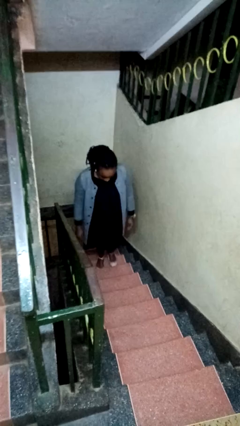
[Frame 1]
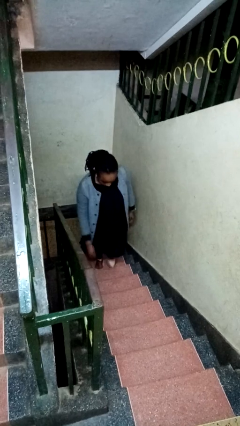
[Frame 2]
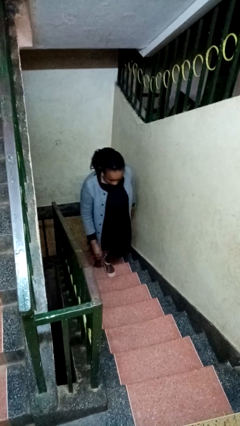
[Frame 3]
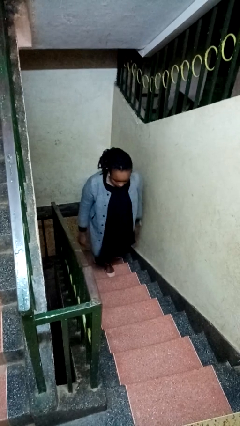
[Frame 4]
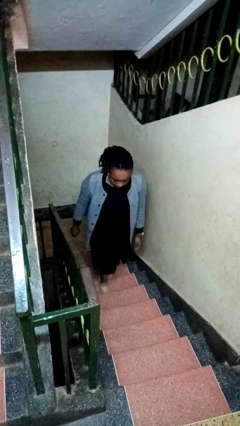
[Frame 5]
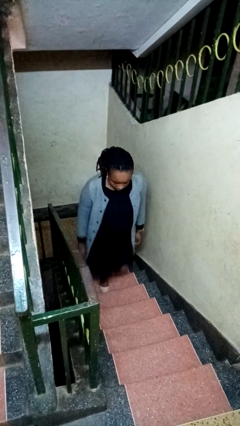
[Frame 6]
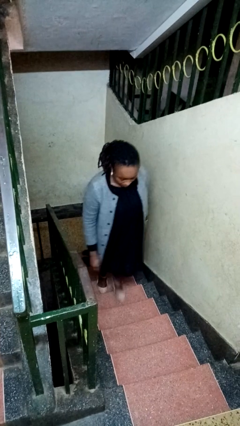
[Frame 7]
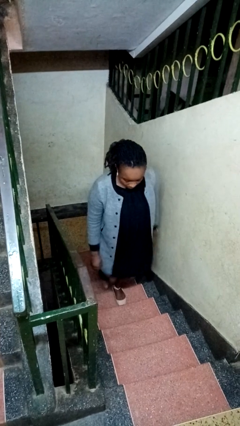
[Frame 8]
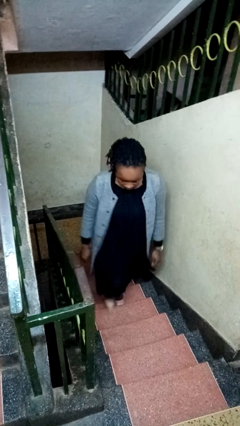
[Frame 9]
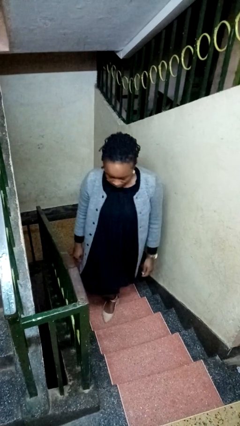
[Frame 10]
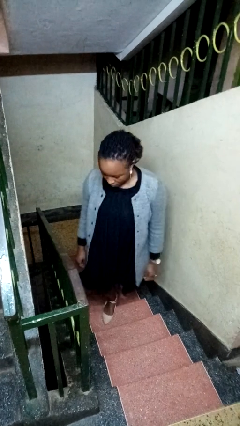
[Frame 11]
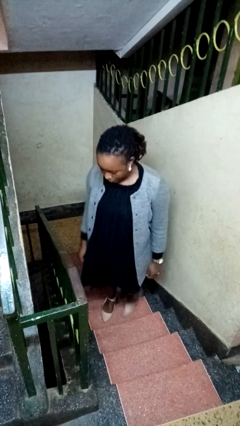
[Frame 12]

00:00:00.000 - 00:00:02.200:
person climbs up stairs

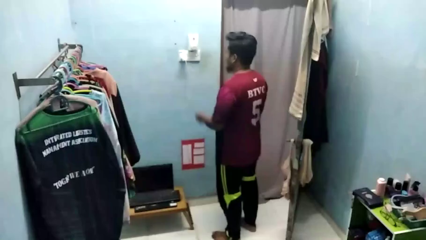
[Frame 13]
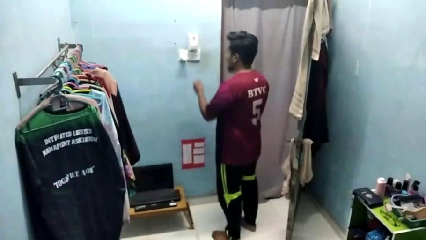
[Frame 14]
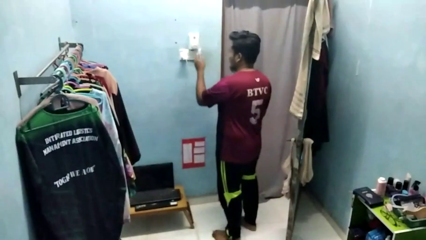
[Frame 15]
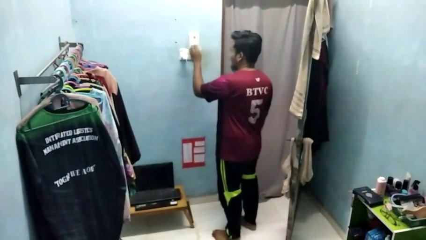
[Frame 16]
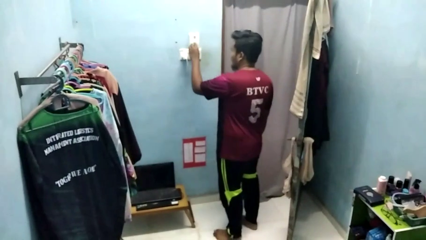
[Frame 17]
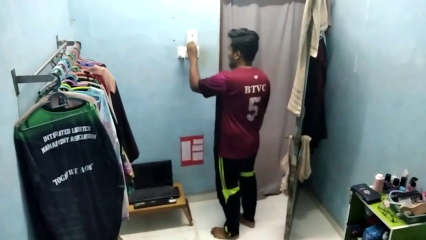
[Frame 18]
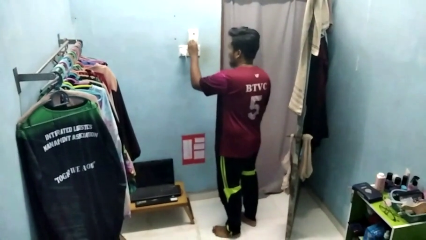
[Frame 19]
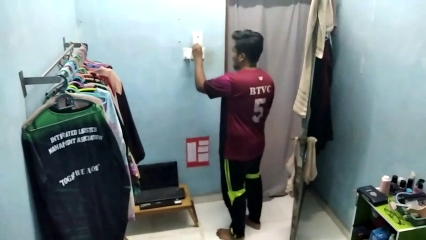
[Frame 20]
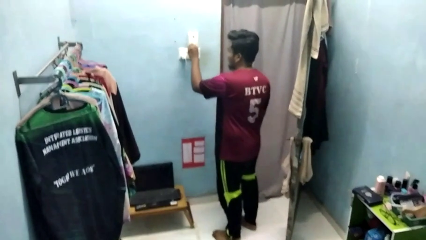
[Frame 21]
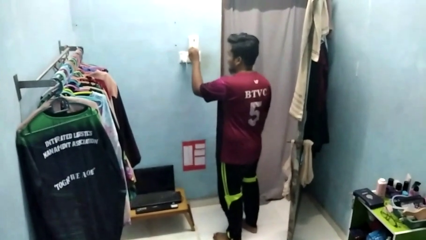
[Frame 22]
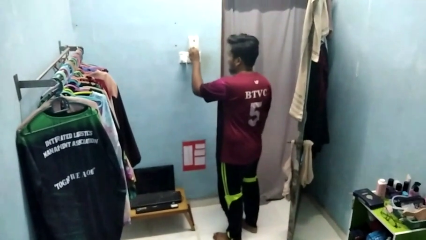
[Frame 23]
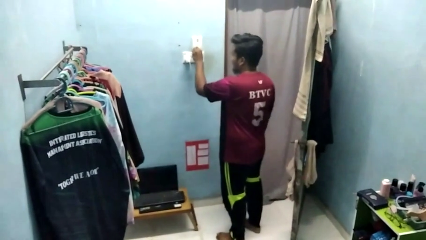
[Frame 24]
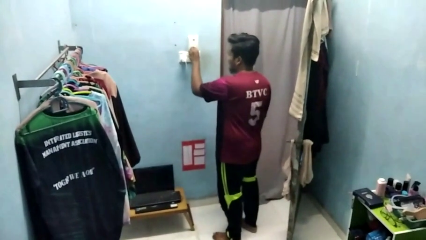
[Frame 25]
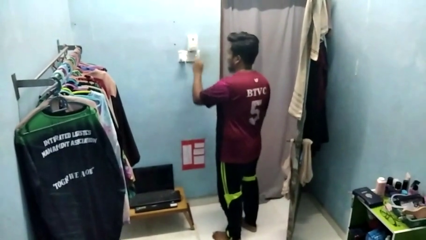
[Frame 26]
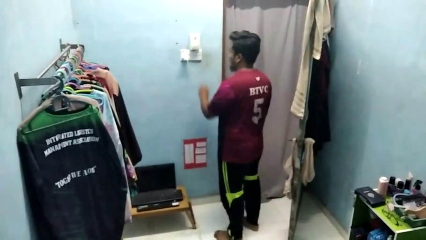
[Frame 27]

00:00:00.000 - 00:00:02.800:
person adjusts thermostat

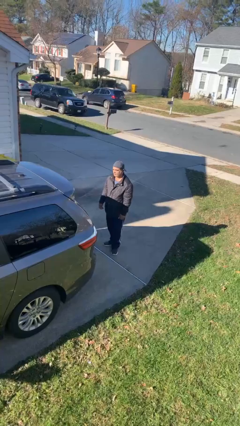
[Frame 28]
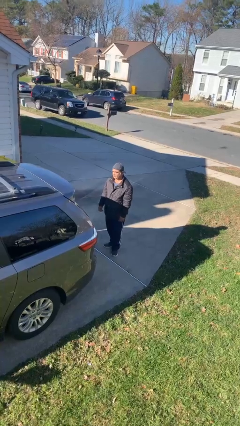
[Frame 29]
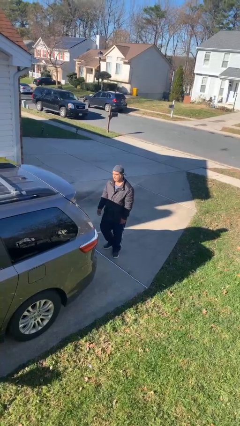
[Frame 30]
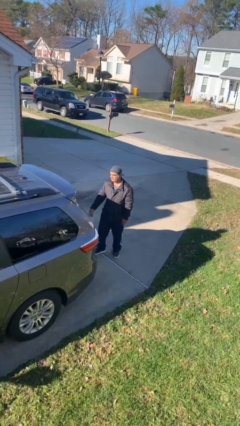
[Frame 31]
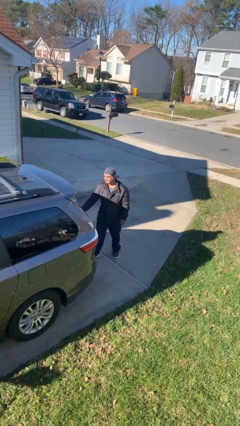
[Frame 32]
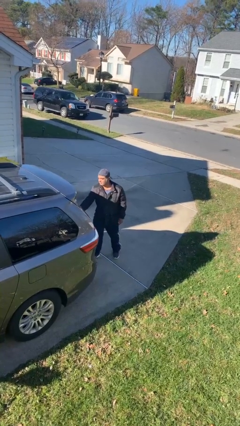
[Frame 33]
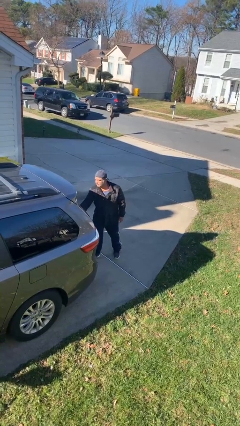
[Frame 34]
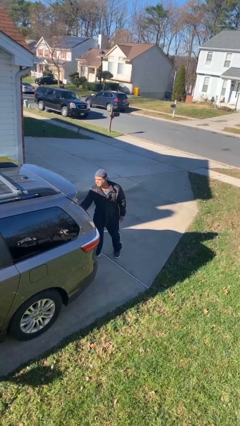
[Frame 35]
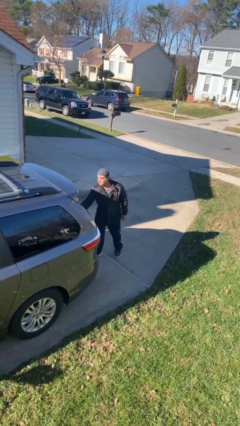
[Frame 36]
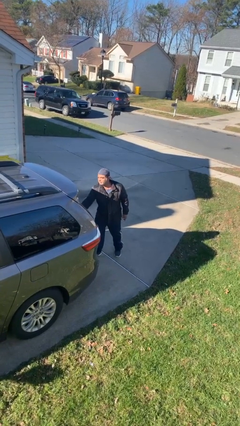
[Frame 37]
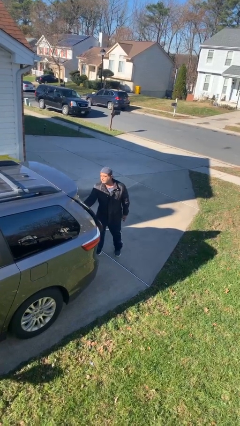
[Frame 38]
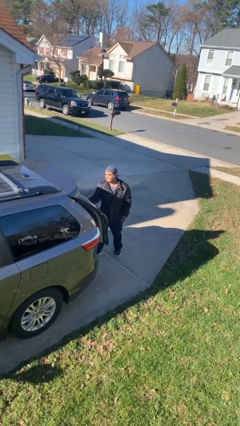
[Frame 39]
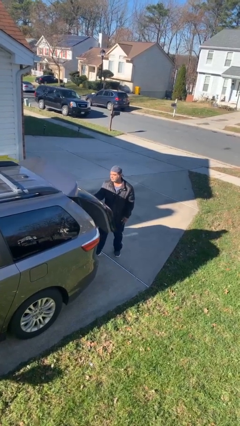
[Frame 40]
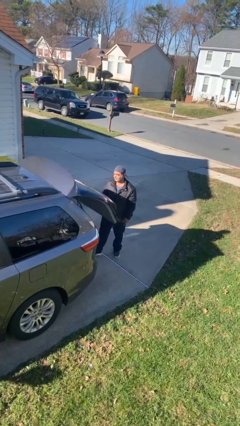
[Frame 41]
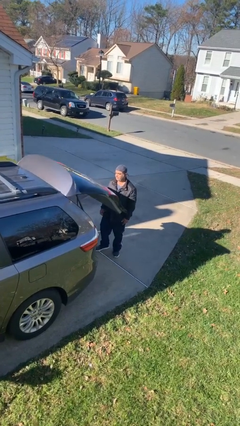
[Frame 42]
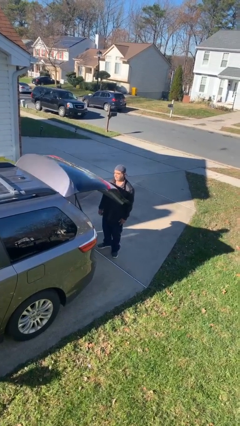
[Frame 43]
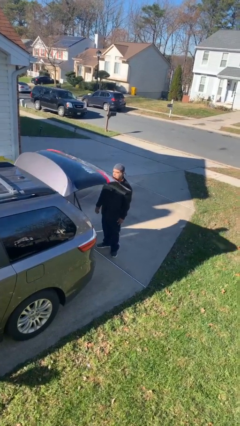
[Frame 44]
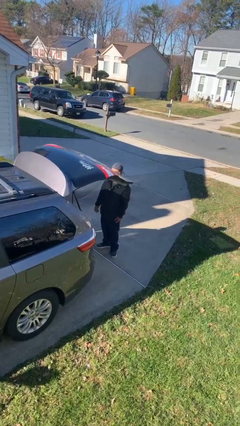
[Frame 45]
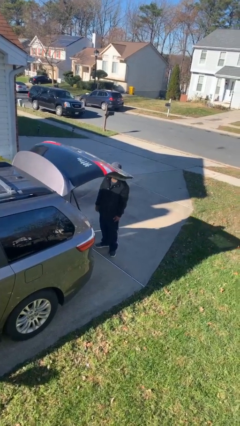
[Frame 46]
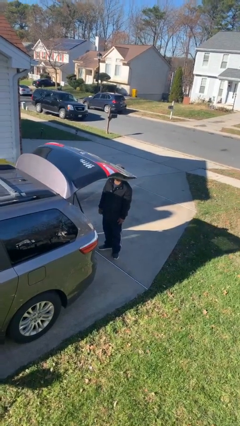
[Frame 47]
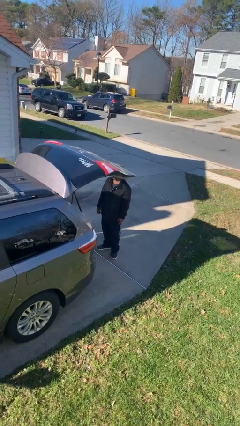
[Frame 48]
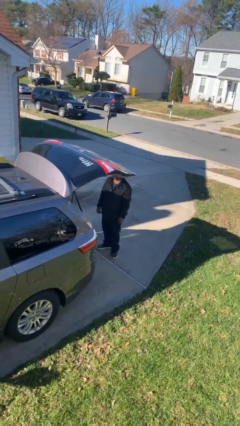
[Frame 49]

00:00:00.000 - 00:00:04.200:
person opens car trunk

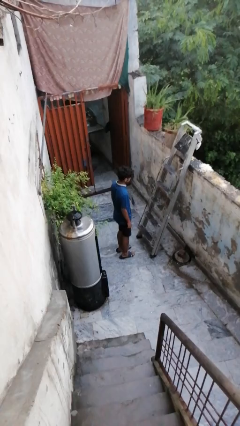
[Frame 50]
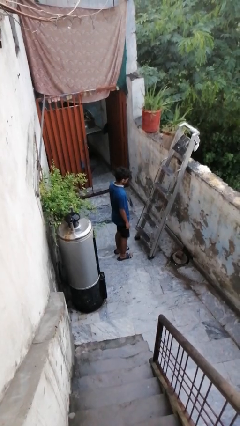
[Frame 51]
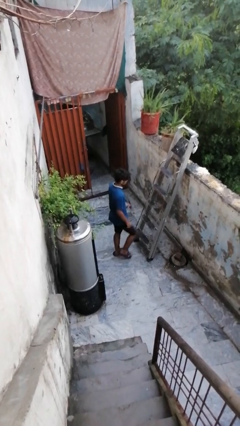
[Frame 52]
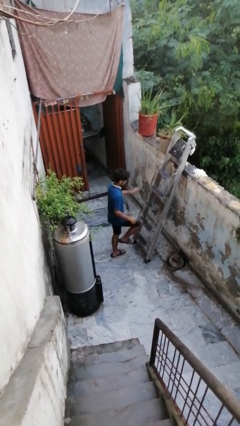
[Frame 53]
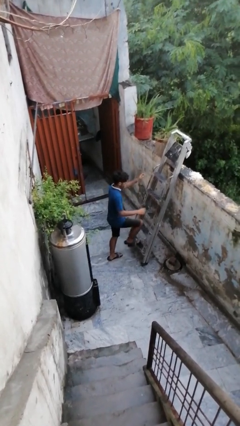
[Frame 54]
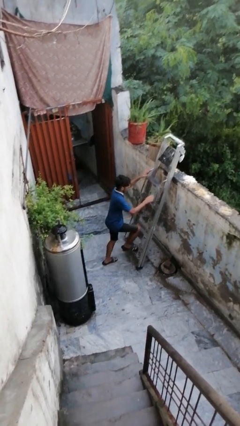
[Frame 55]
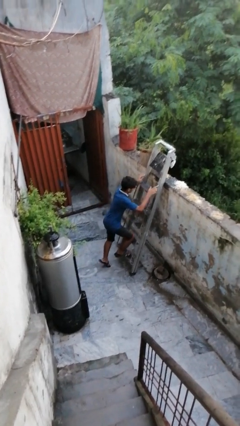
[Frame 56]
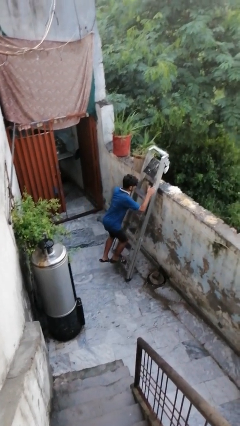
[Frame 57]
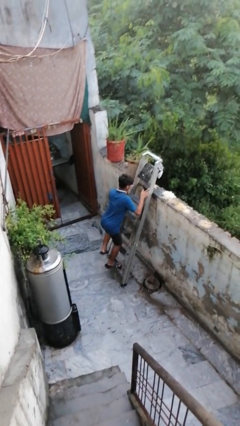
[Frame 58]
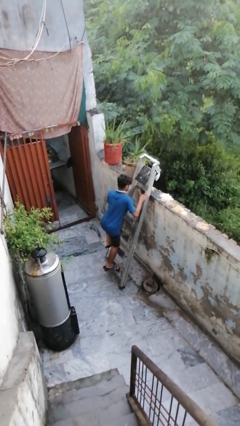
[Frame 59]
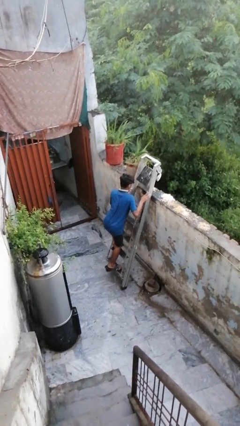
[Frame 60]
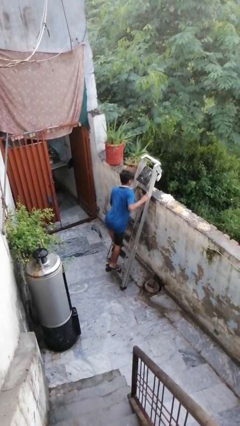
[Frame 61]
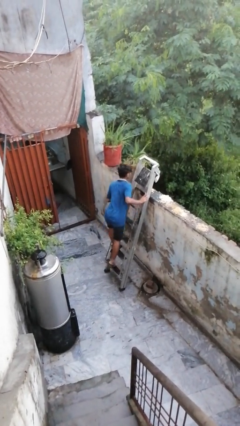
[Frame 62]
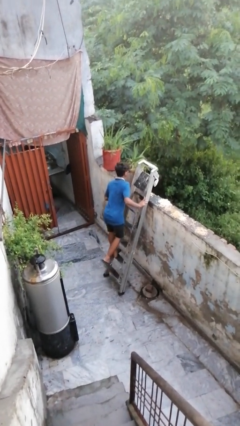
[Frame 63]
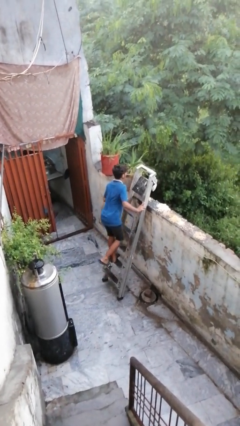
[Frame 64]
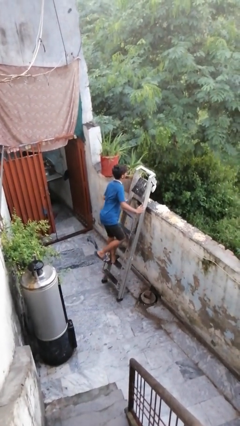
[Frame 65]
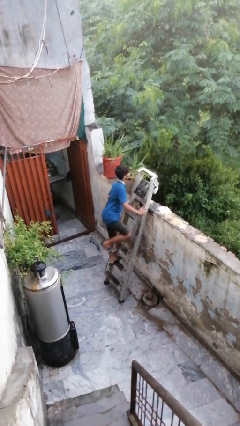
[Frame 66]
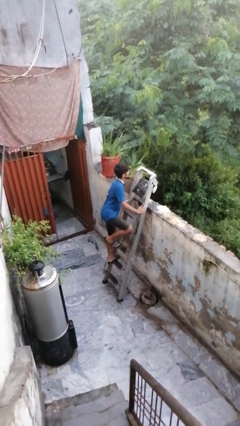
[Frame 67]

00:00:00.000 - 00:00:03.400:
person climbs up ladder

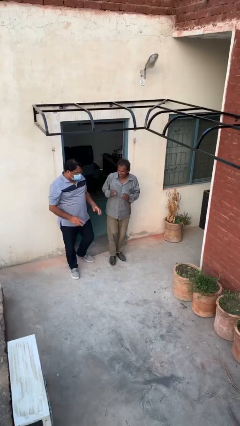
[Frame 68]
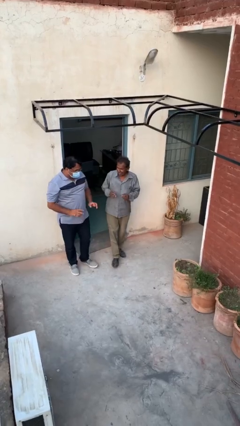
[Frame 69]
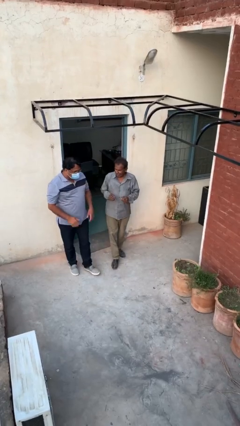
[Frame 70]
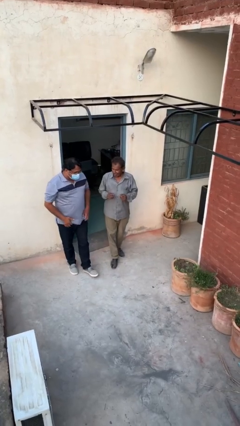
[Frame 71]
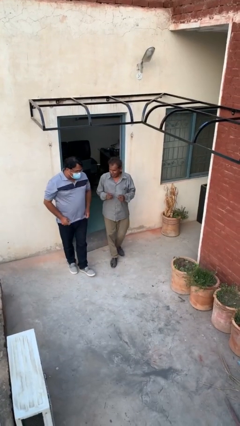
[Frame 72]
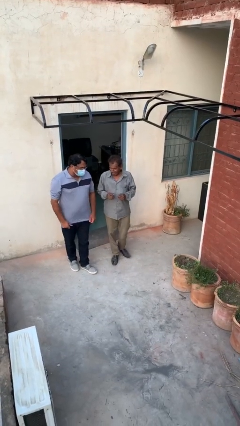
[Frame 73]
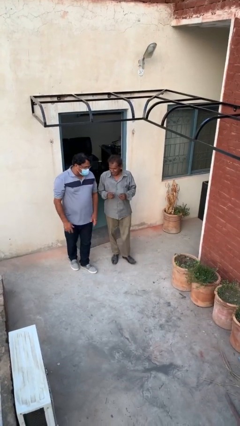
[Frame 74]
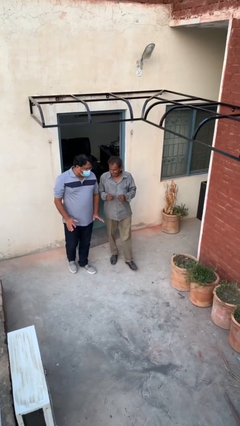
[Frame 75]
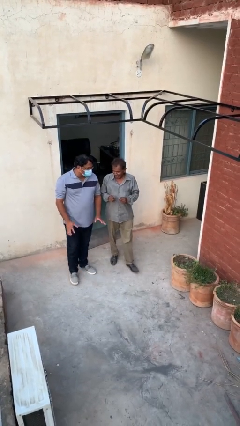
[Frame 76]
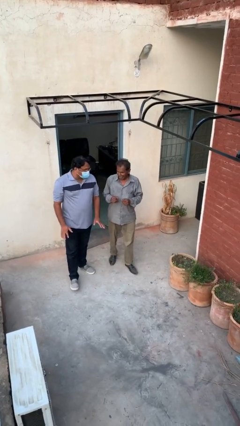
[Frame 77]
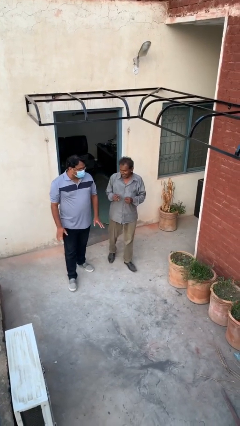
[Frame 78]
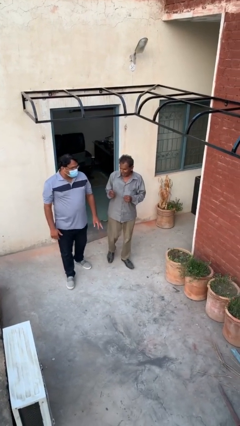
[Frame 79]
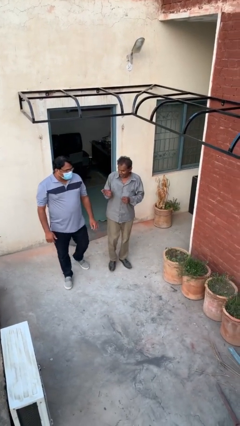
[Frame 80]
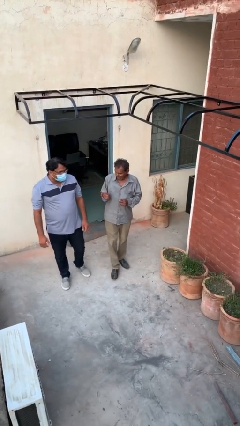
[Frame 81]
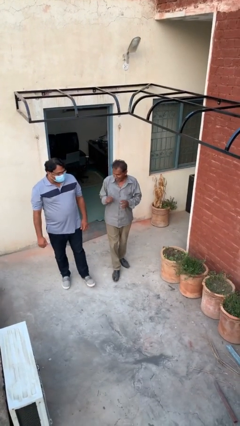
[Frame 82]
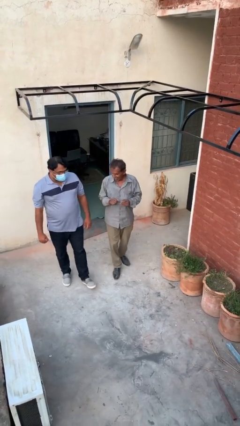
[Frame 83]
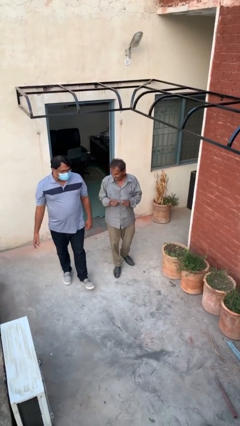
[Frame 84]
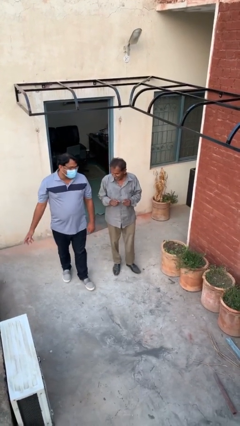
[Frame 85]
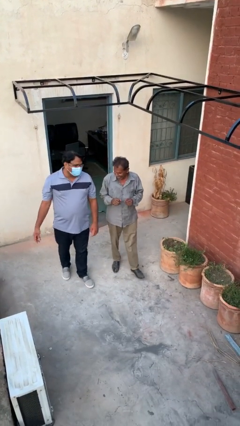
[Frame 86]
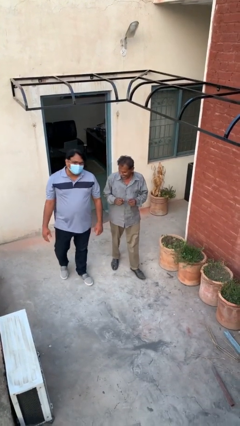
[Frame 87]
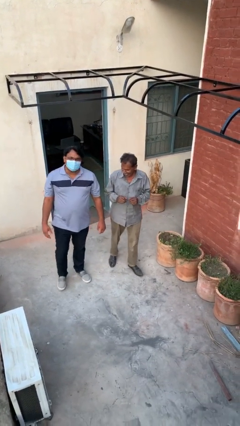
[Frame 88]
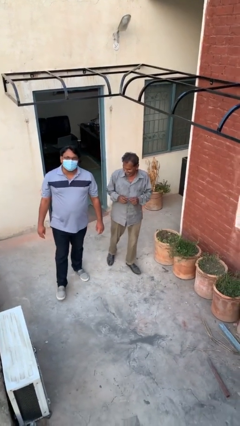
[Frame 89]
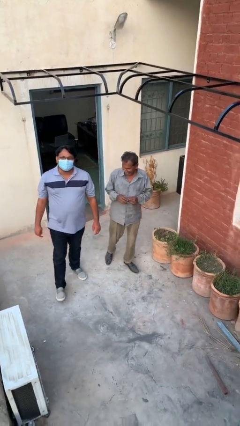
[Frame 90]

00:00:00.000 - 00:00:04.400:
person talks to person

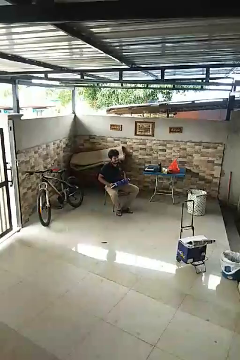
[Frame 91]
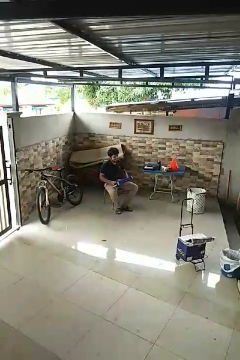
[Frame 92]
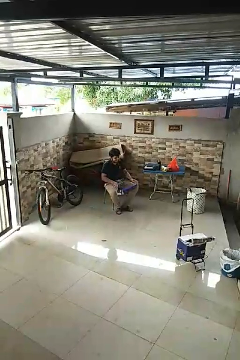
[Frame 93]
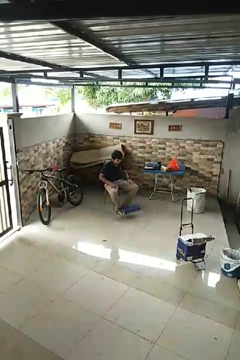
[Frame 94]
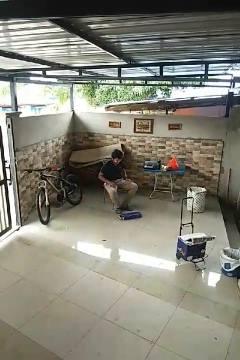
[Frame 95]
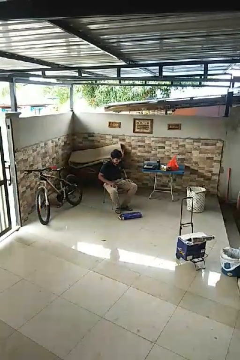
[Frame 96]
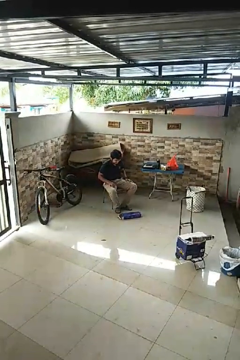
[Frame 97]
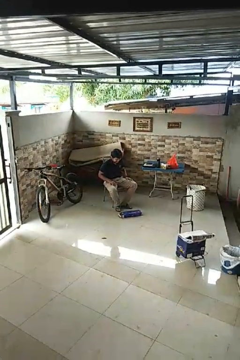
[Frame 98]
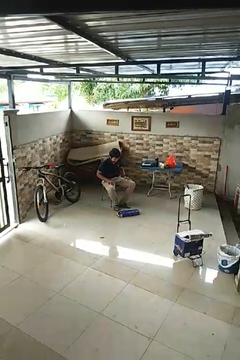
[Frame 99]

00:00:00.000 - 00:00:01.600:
person drops object
